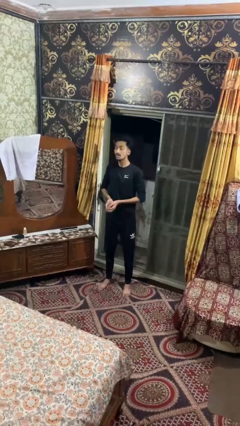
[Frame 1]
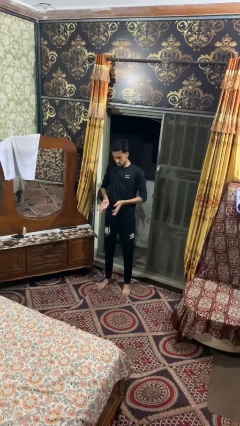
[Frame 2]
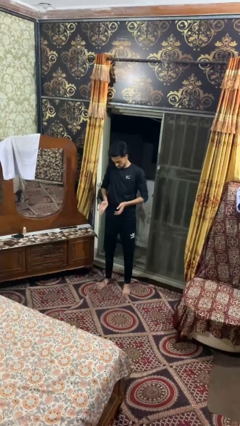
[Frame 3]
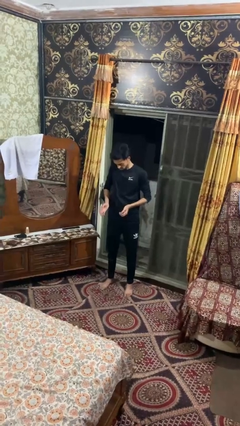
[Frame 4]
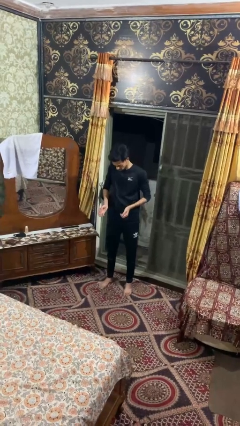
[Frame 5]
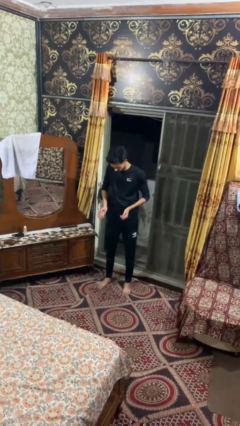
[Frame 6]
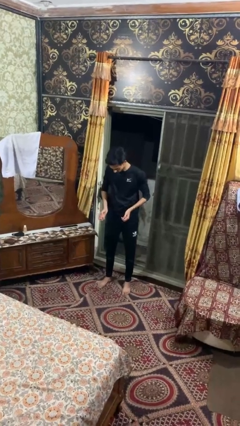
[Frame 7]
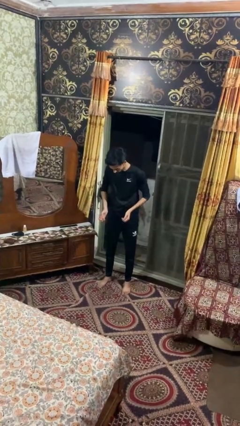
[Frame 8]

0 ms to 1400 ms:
person catches dropped object

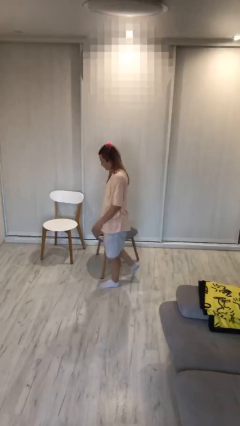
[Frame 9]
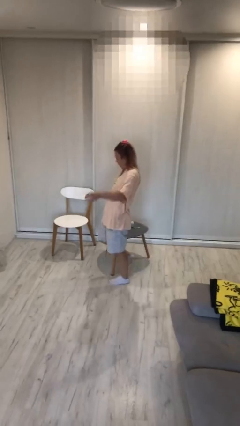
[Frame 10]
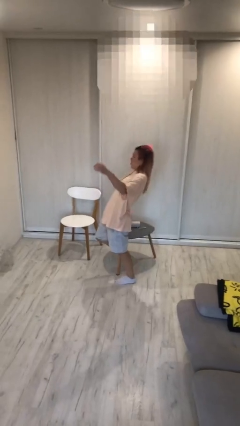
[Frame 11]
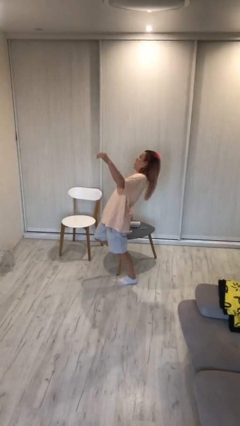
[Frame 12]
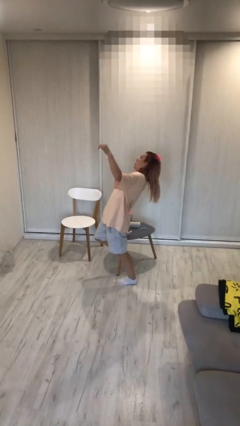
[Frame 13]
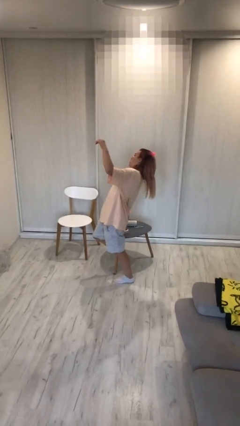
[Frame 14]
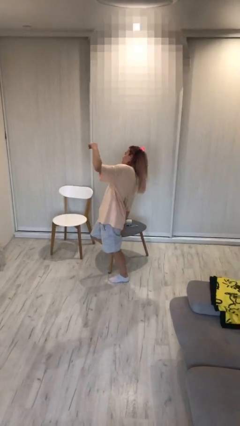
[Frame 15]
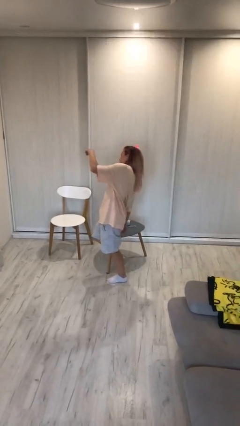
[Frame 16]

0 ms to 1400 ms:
person bumps into table

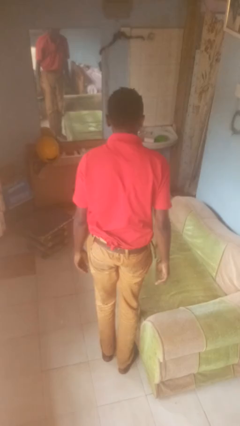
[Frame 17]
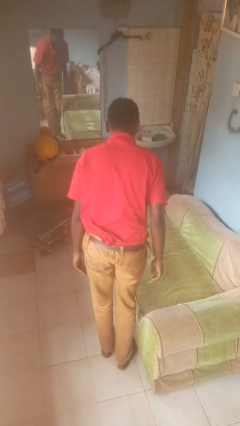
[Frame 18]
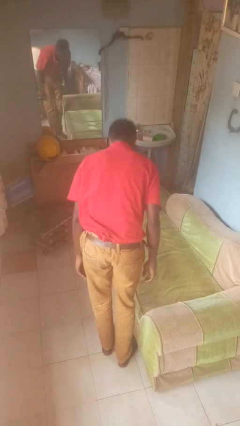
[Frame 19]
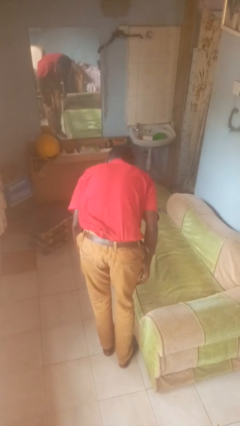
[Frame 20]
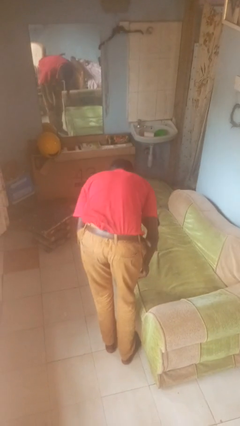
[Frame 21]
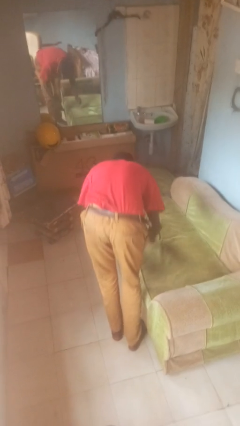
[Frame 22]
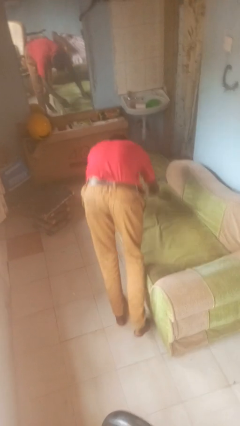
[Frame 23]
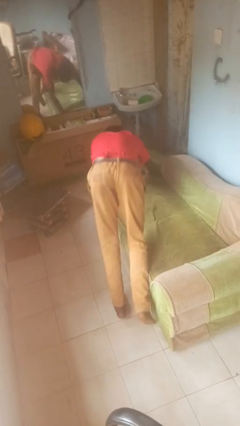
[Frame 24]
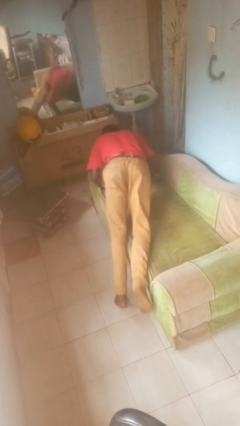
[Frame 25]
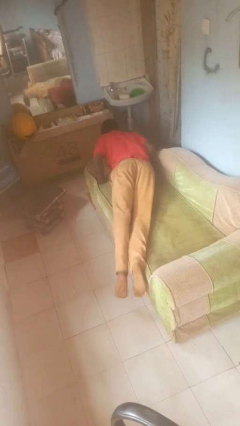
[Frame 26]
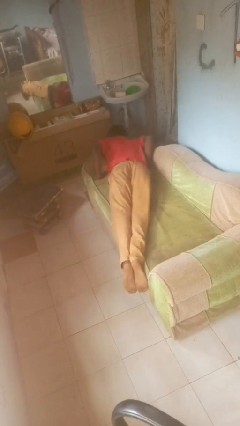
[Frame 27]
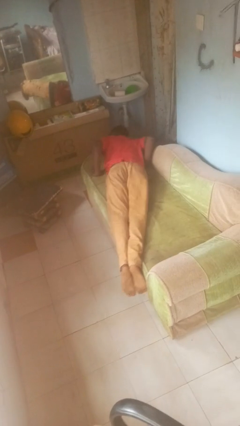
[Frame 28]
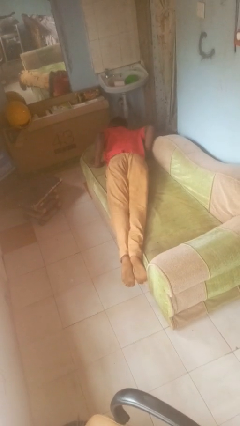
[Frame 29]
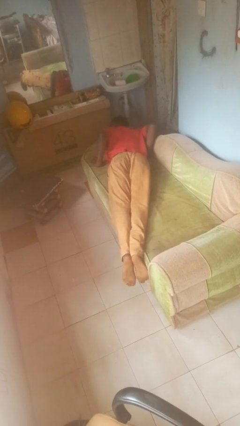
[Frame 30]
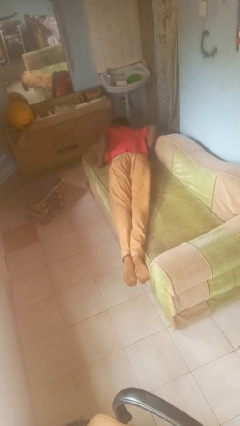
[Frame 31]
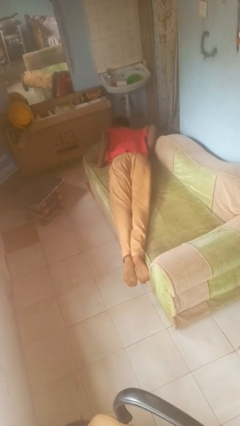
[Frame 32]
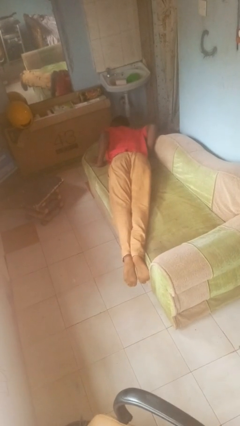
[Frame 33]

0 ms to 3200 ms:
person lies down on couch

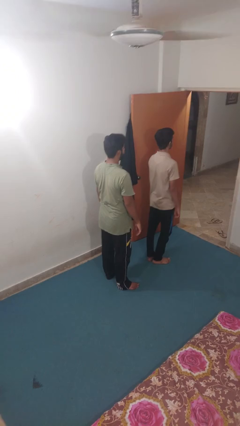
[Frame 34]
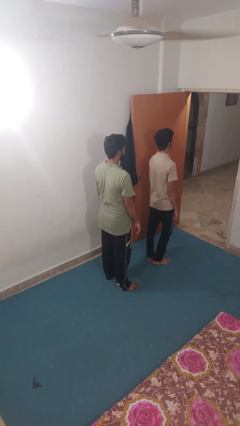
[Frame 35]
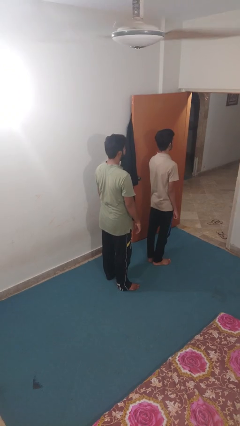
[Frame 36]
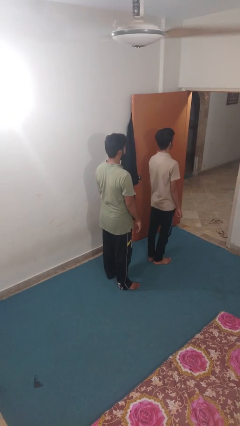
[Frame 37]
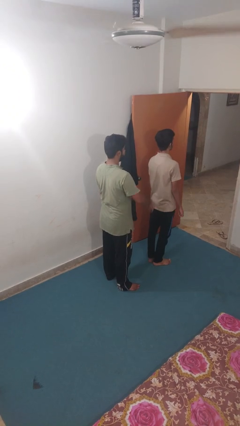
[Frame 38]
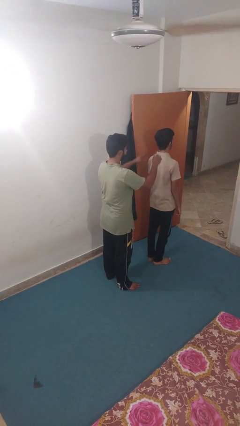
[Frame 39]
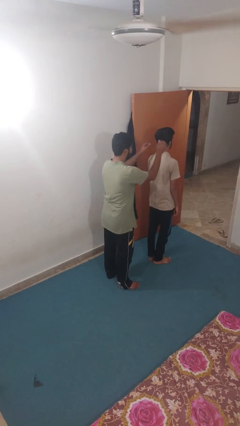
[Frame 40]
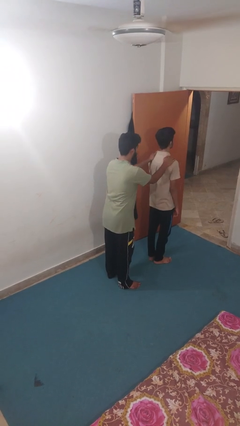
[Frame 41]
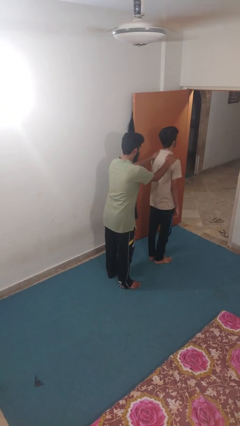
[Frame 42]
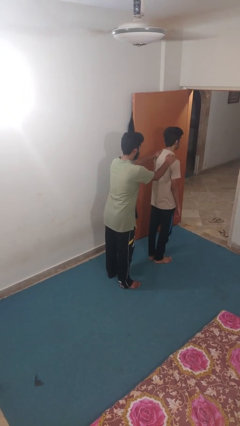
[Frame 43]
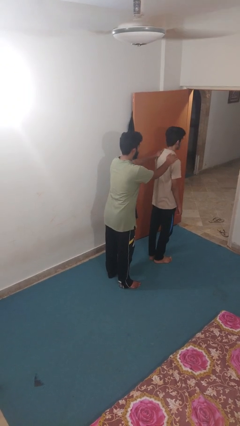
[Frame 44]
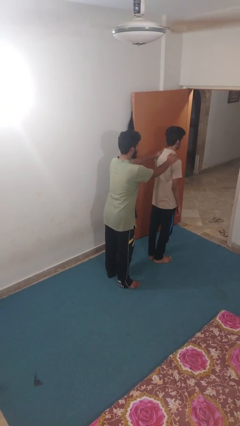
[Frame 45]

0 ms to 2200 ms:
person grabs person by shoulder

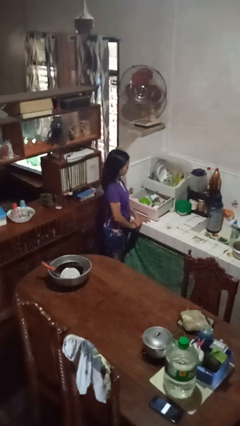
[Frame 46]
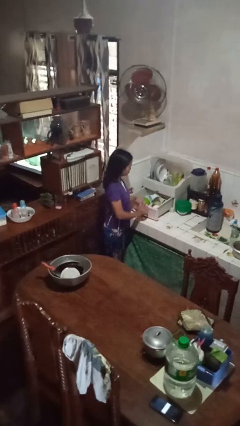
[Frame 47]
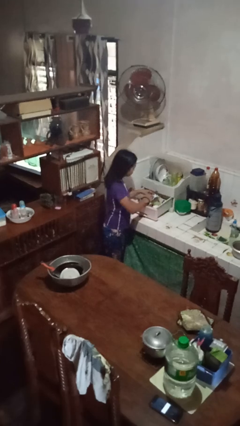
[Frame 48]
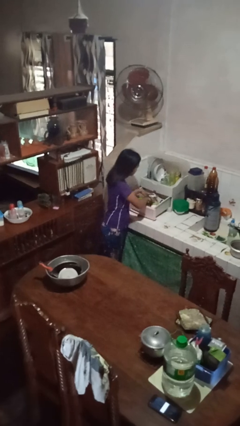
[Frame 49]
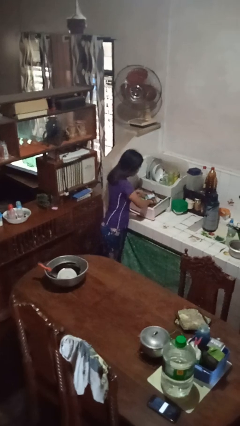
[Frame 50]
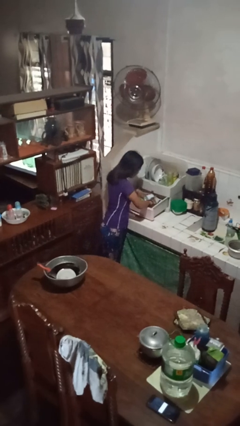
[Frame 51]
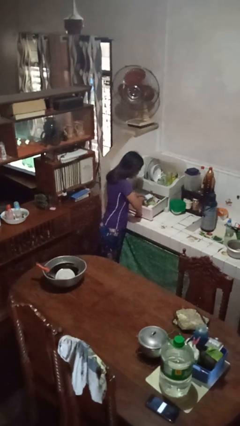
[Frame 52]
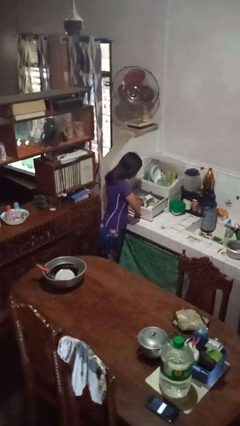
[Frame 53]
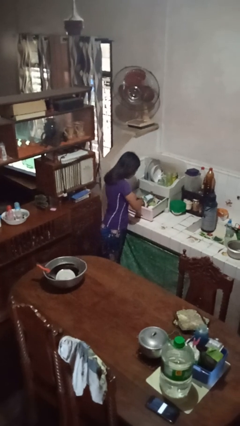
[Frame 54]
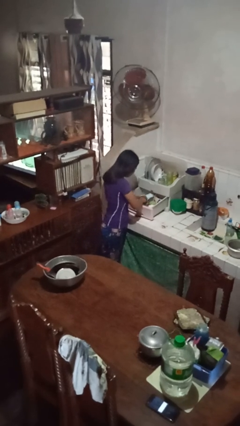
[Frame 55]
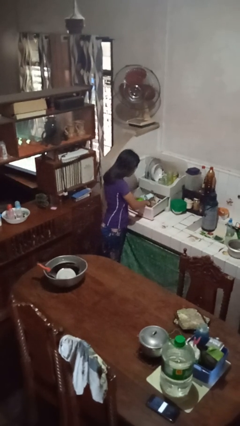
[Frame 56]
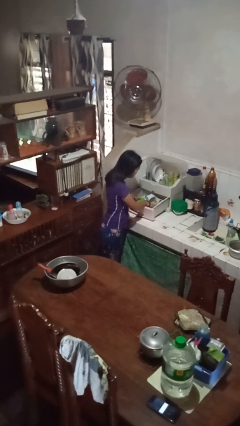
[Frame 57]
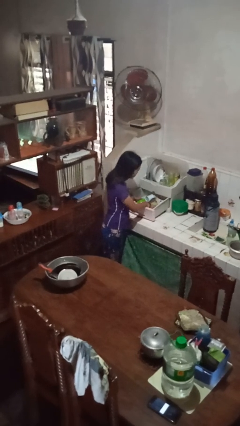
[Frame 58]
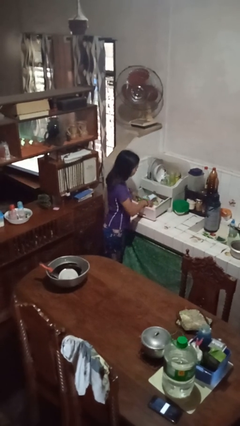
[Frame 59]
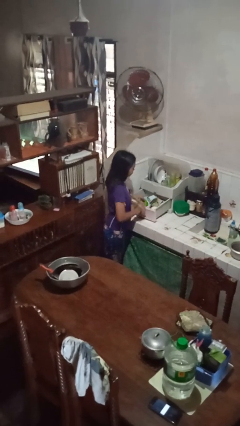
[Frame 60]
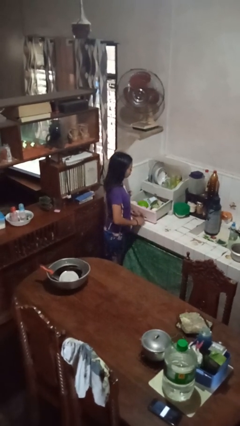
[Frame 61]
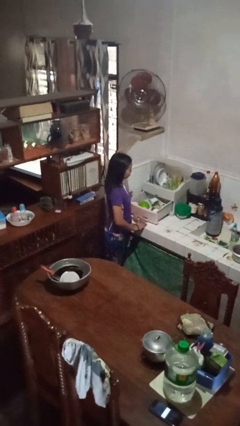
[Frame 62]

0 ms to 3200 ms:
person searches in kitchen drawer

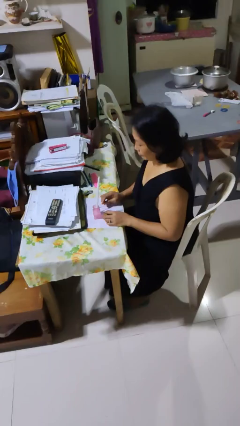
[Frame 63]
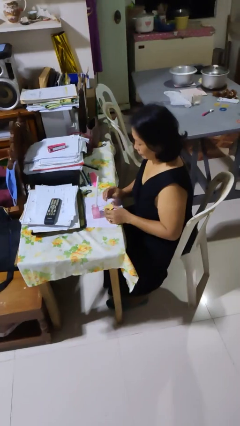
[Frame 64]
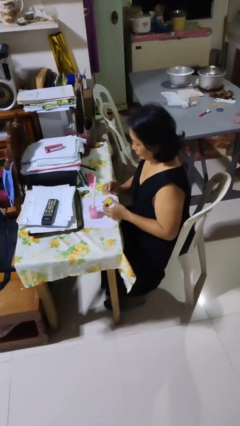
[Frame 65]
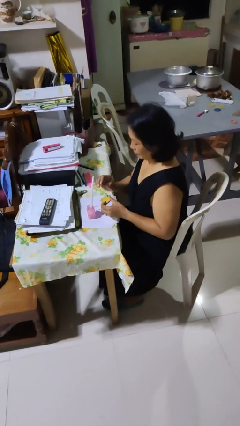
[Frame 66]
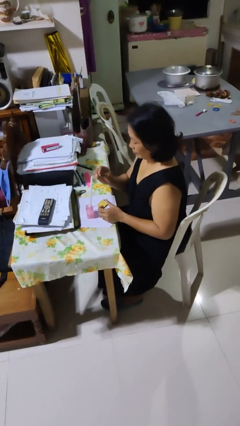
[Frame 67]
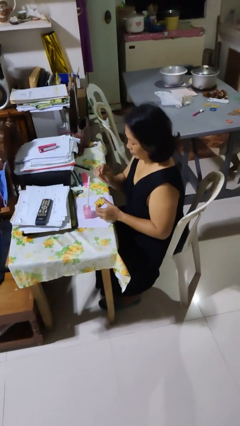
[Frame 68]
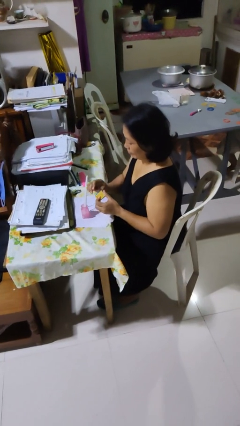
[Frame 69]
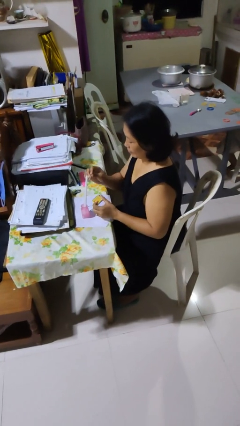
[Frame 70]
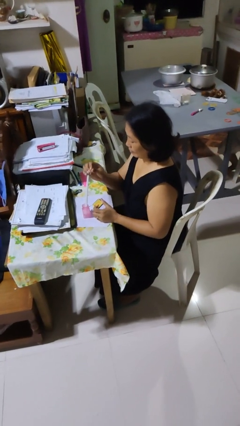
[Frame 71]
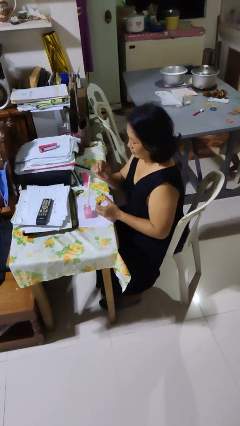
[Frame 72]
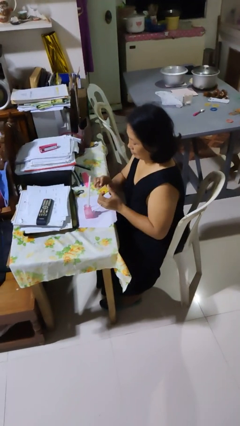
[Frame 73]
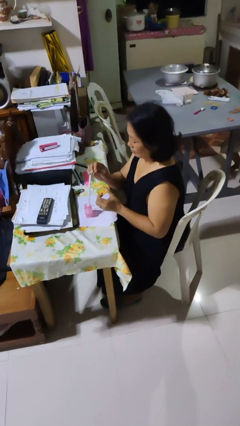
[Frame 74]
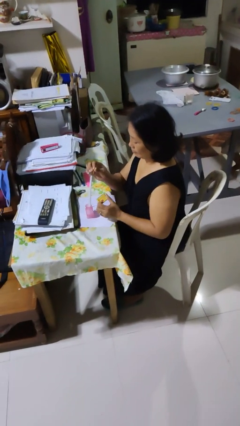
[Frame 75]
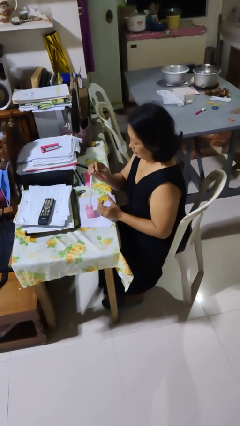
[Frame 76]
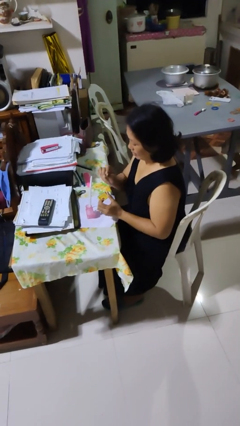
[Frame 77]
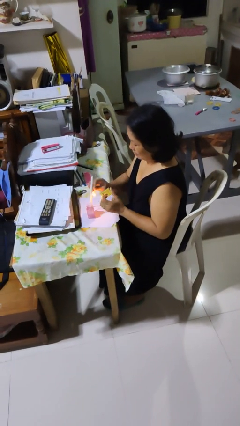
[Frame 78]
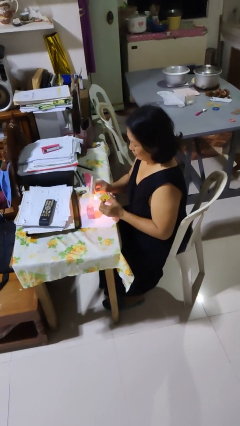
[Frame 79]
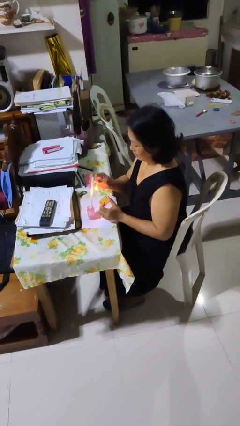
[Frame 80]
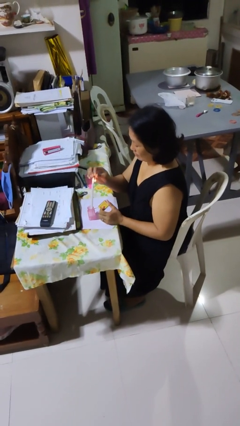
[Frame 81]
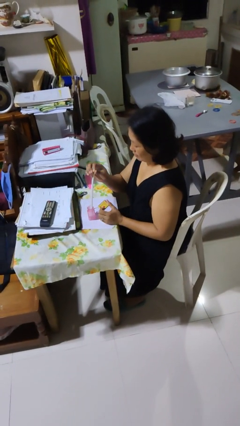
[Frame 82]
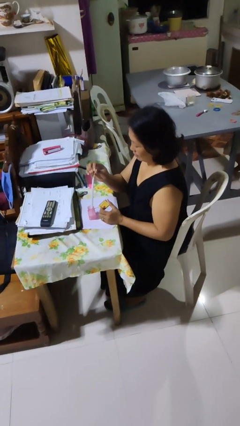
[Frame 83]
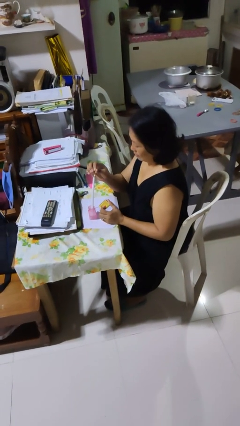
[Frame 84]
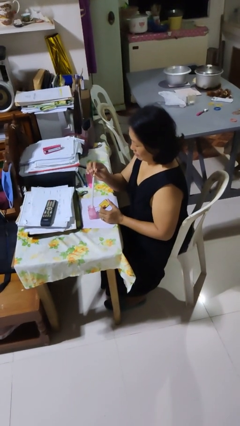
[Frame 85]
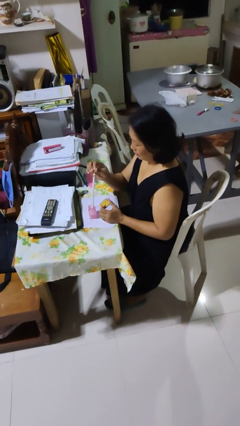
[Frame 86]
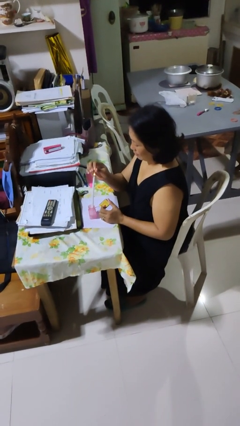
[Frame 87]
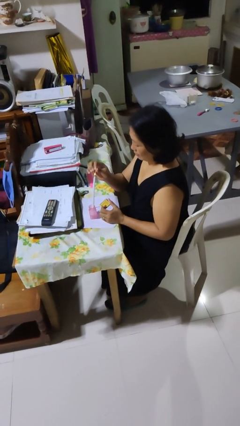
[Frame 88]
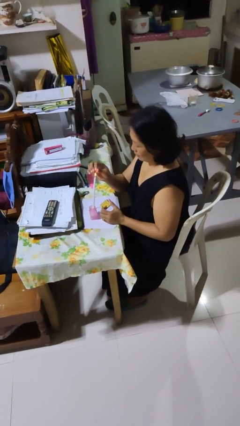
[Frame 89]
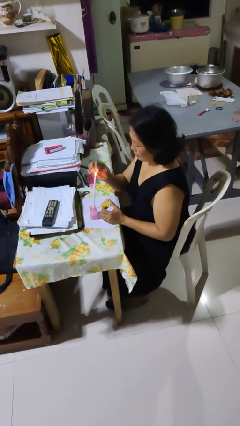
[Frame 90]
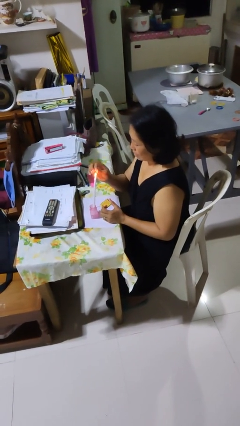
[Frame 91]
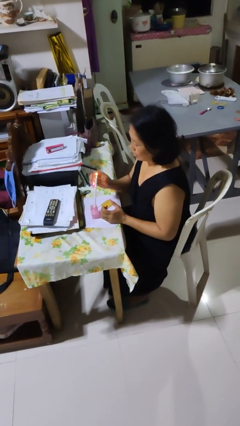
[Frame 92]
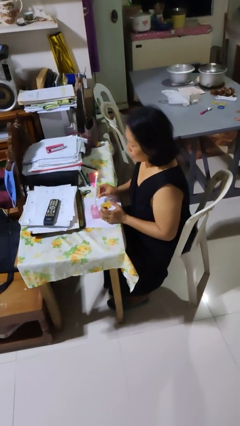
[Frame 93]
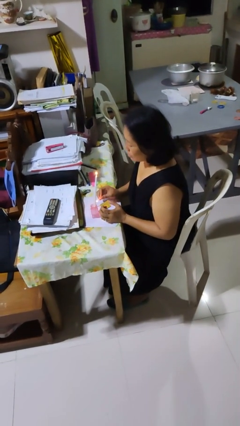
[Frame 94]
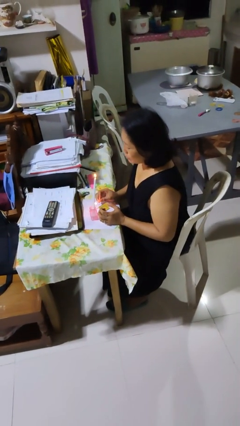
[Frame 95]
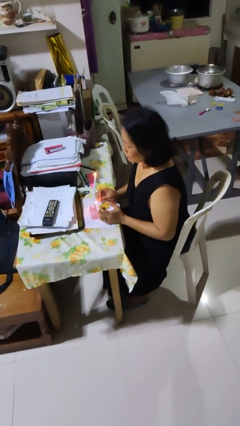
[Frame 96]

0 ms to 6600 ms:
person lights candle
